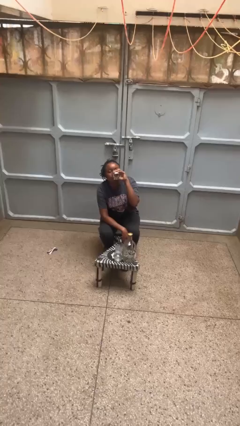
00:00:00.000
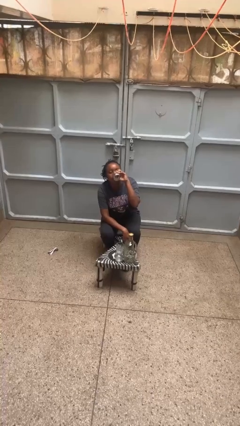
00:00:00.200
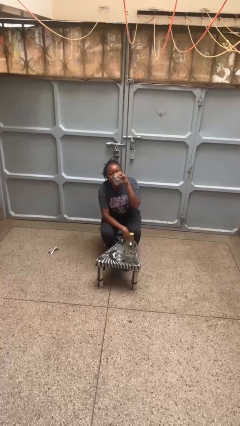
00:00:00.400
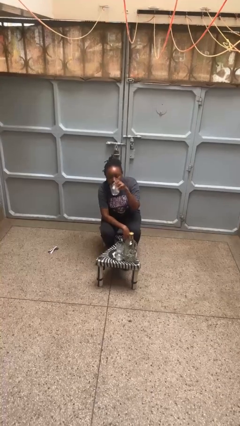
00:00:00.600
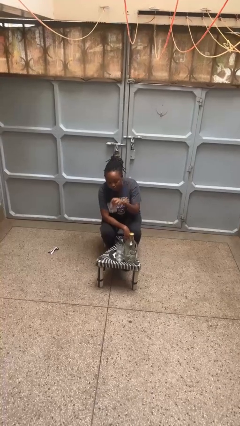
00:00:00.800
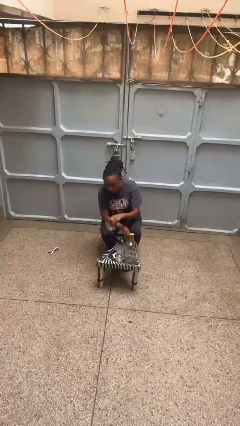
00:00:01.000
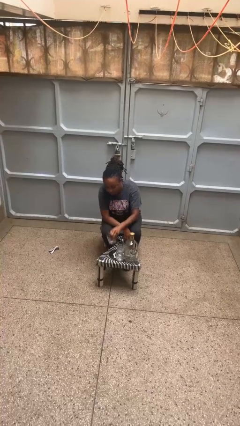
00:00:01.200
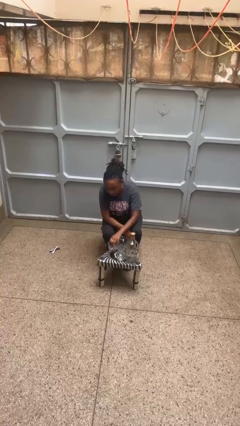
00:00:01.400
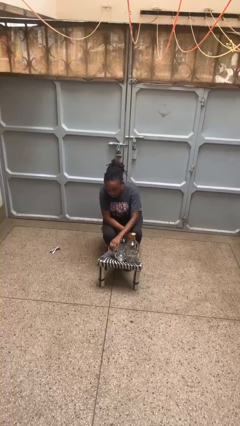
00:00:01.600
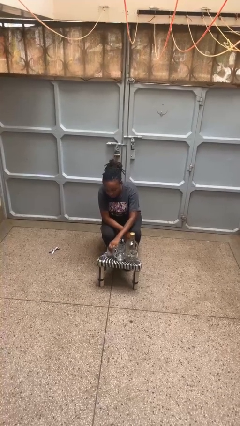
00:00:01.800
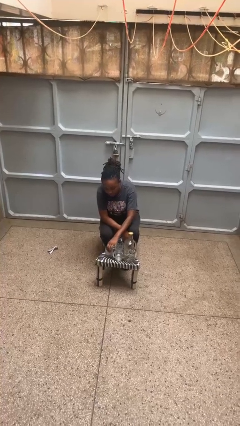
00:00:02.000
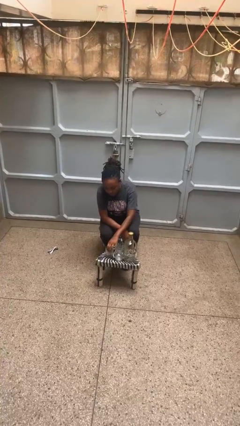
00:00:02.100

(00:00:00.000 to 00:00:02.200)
person puts down object on table

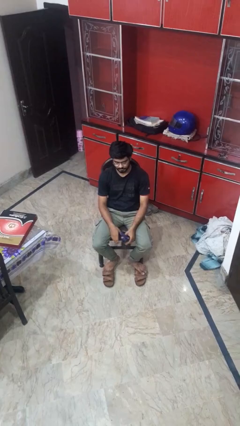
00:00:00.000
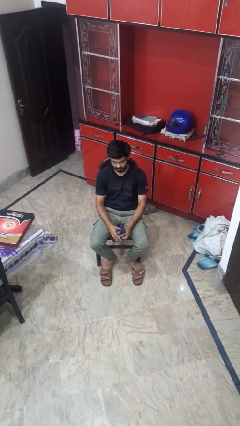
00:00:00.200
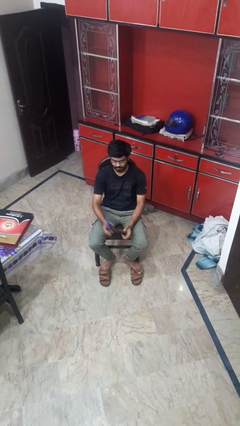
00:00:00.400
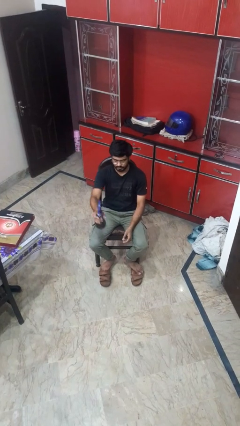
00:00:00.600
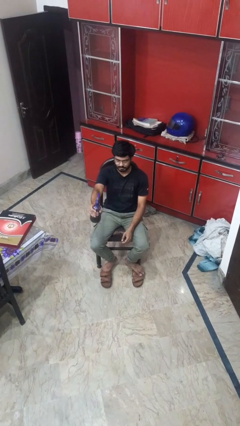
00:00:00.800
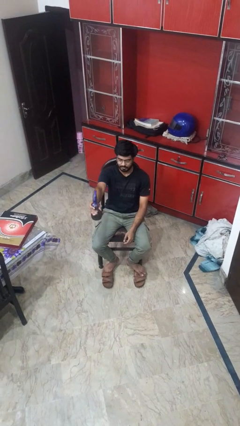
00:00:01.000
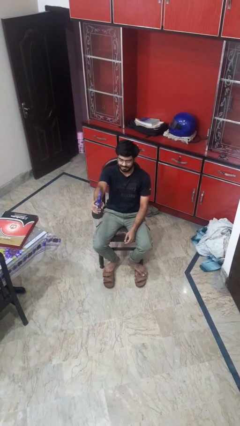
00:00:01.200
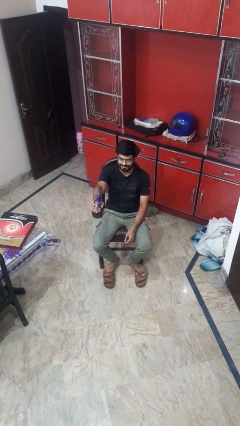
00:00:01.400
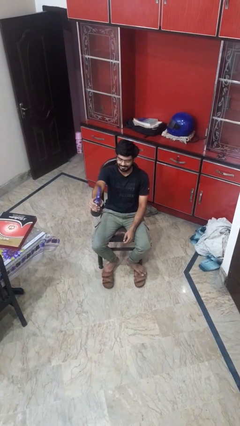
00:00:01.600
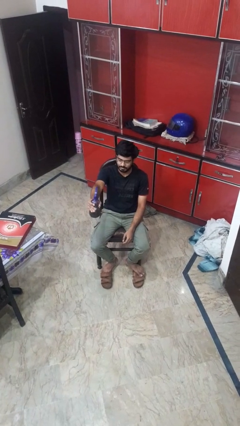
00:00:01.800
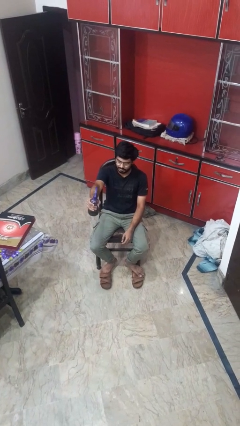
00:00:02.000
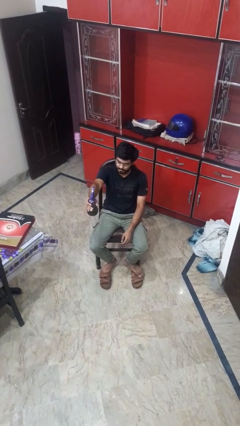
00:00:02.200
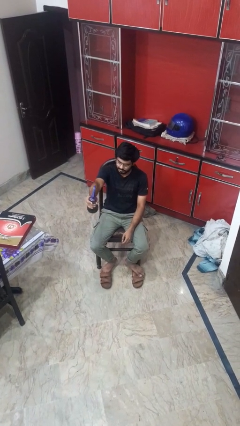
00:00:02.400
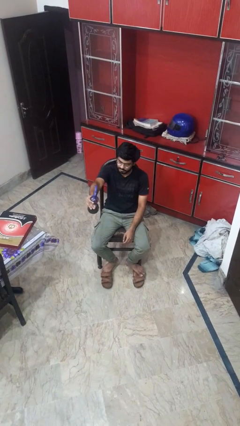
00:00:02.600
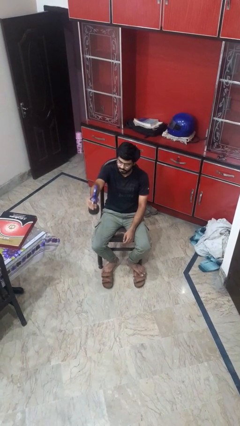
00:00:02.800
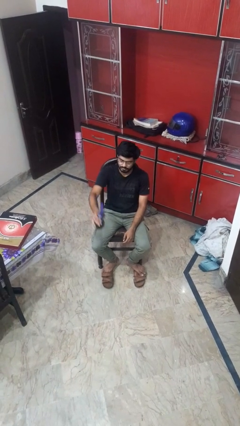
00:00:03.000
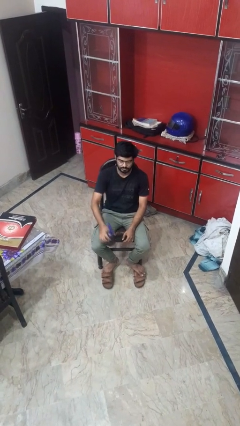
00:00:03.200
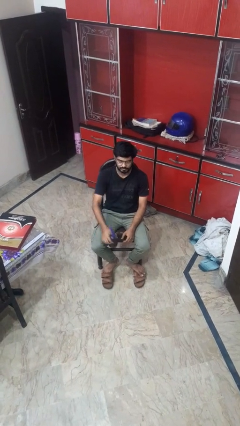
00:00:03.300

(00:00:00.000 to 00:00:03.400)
person squeezes object

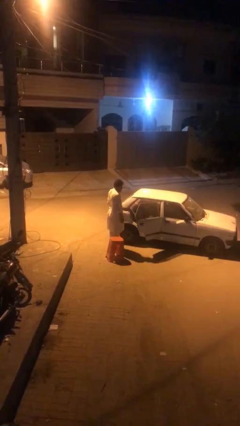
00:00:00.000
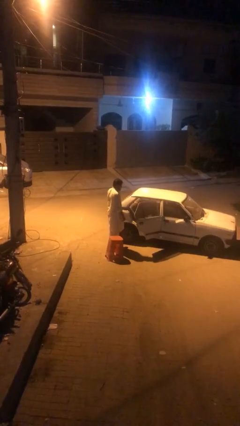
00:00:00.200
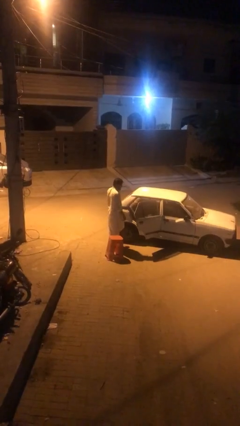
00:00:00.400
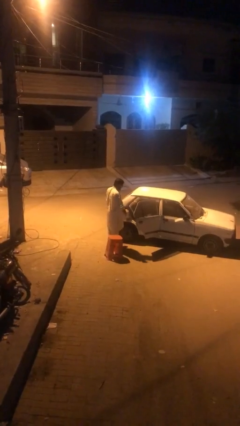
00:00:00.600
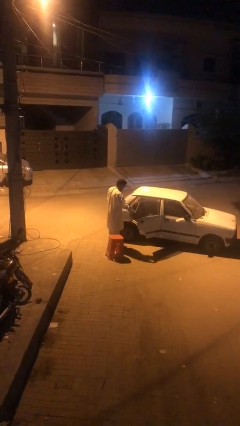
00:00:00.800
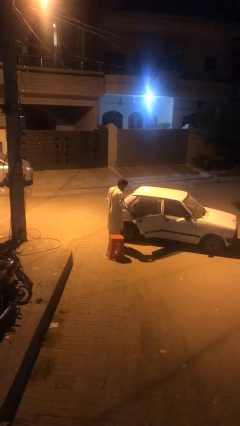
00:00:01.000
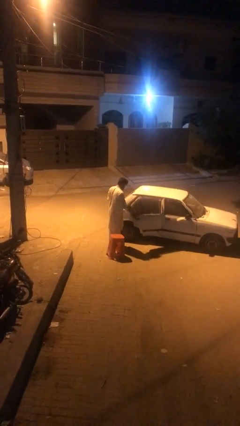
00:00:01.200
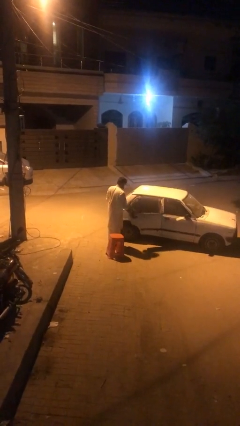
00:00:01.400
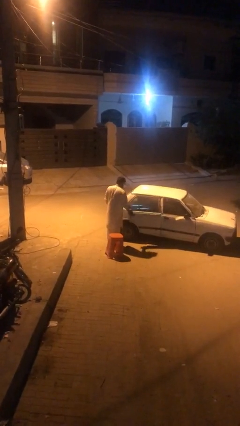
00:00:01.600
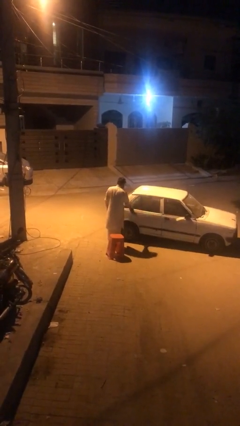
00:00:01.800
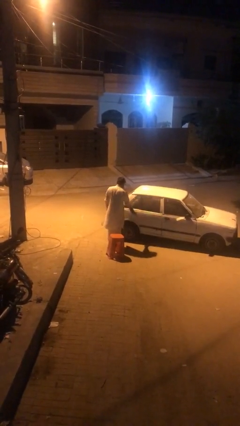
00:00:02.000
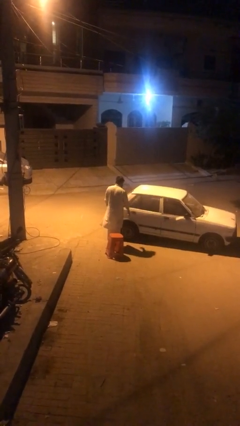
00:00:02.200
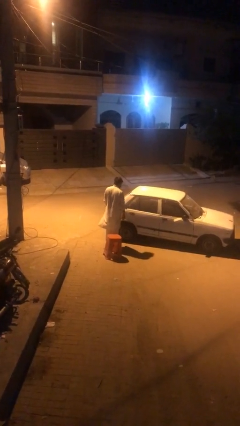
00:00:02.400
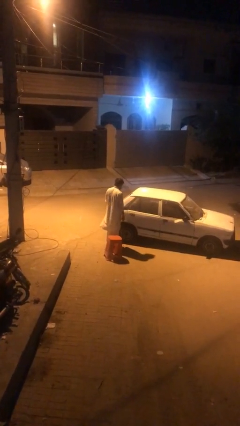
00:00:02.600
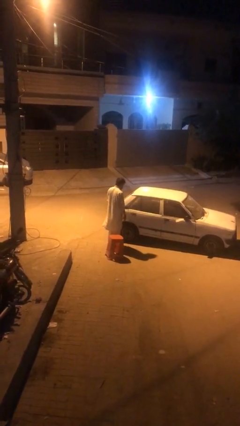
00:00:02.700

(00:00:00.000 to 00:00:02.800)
person closes car door

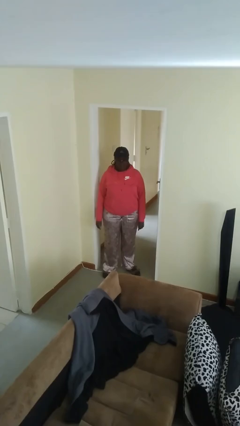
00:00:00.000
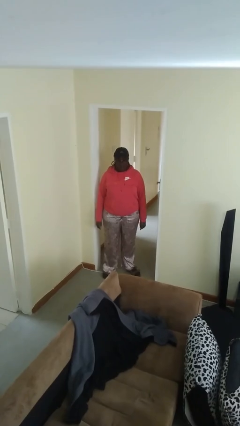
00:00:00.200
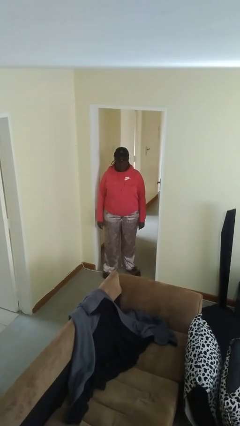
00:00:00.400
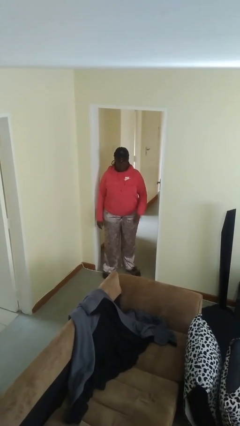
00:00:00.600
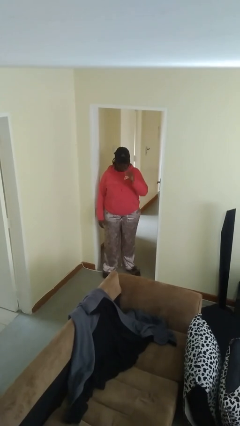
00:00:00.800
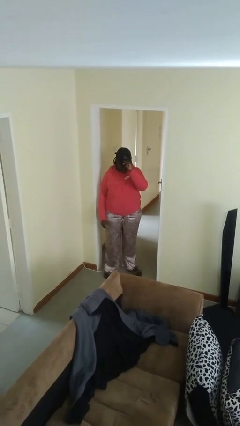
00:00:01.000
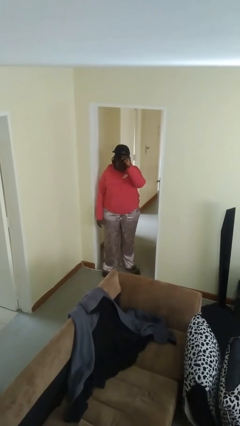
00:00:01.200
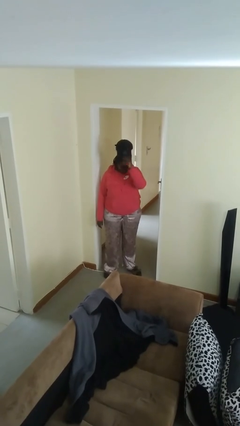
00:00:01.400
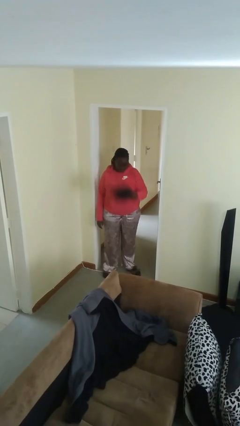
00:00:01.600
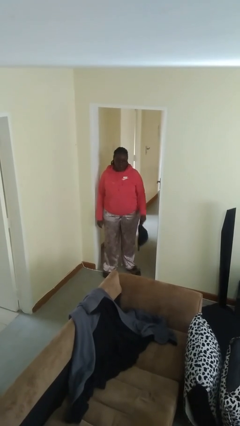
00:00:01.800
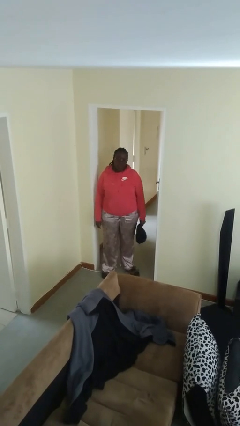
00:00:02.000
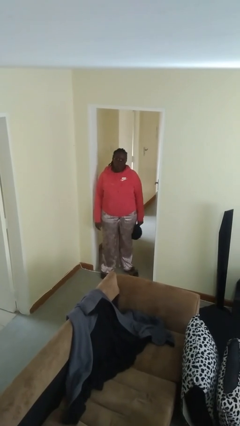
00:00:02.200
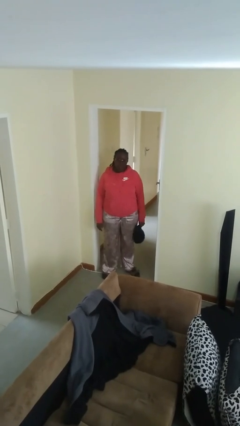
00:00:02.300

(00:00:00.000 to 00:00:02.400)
person takes off hat

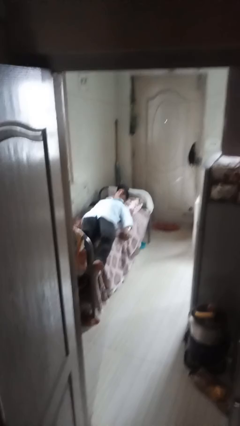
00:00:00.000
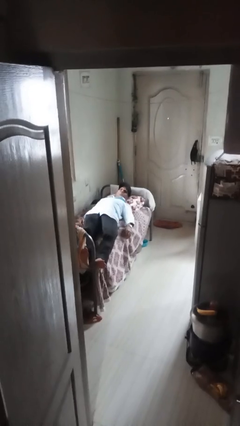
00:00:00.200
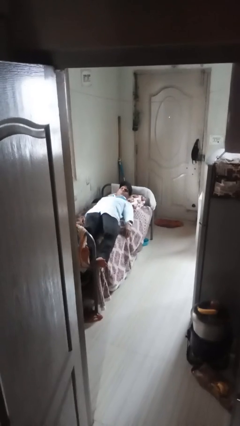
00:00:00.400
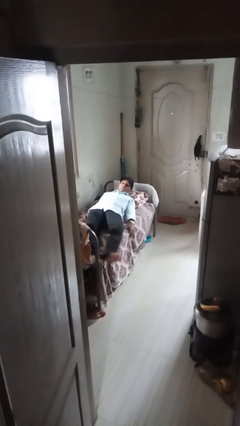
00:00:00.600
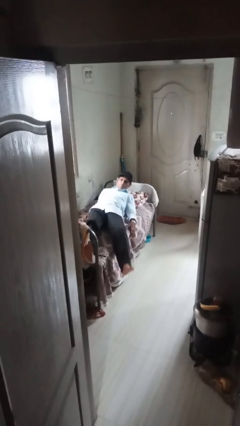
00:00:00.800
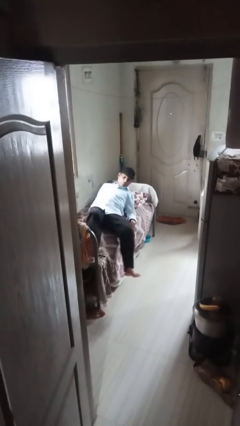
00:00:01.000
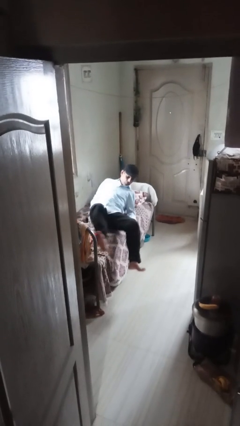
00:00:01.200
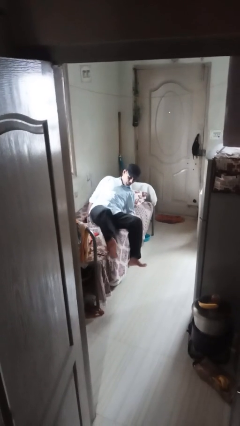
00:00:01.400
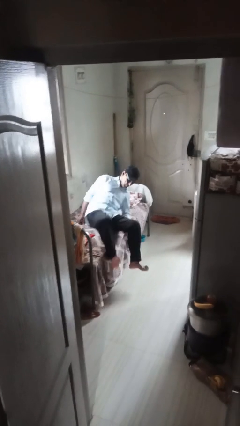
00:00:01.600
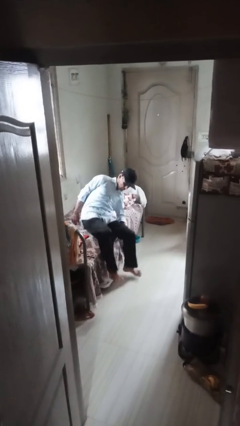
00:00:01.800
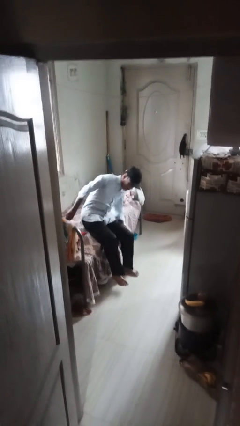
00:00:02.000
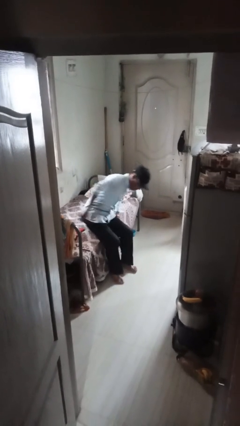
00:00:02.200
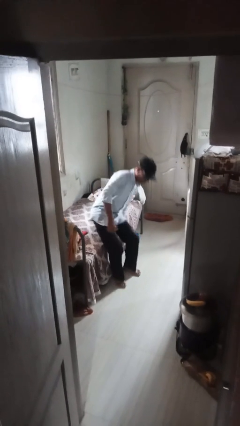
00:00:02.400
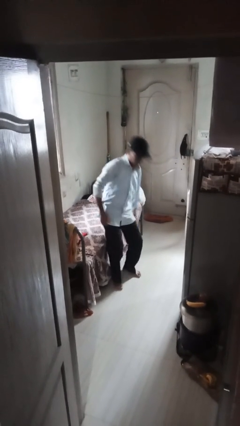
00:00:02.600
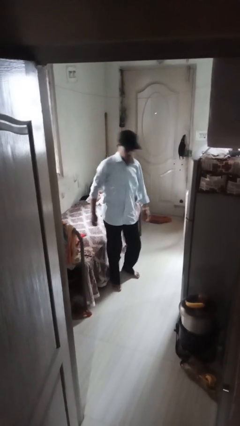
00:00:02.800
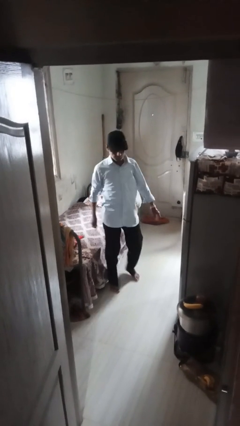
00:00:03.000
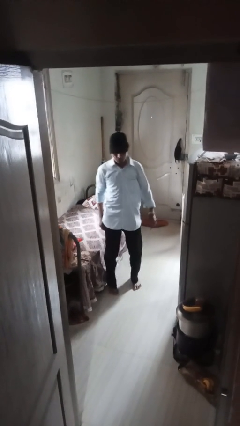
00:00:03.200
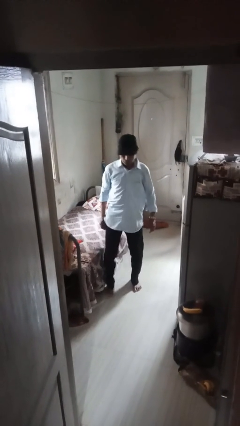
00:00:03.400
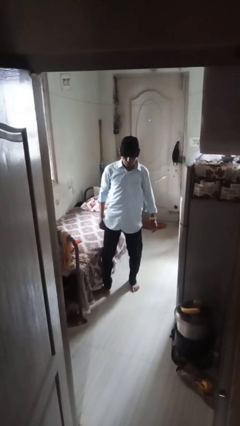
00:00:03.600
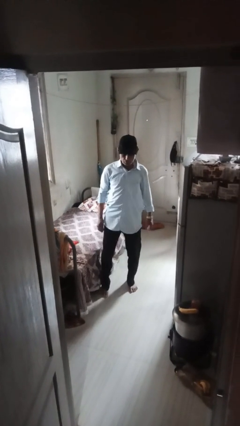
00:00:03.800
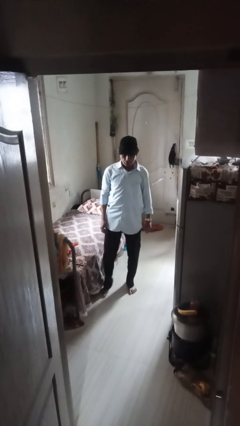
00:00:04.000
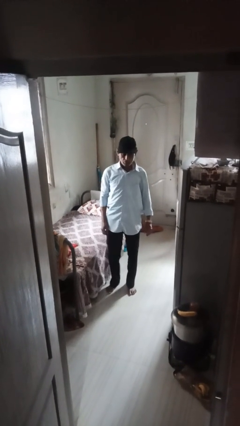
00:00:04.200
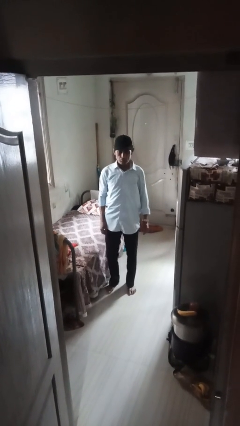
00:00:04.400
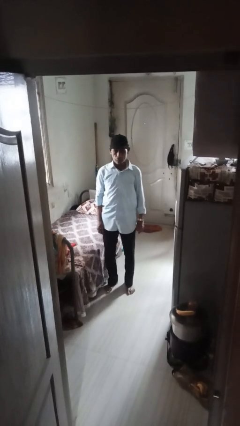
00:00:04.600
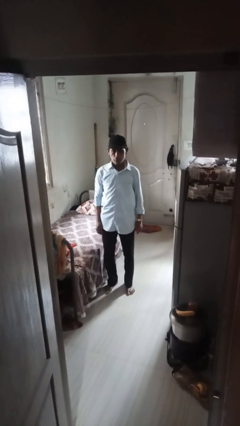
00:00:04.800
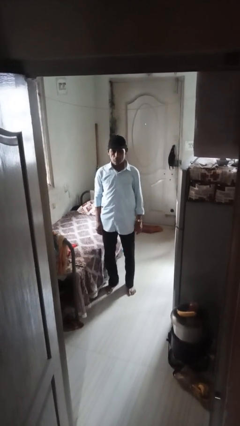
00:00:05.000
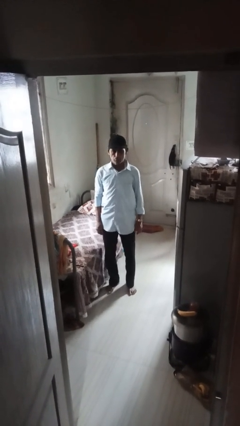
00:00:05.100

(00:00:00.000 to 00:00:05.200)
person stands up

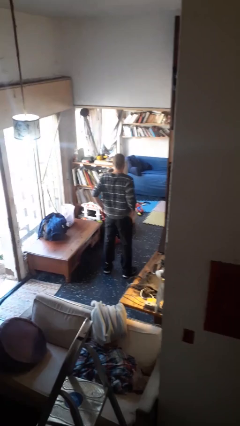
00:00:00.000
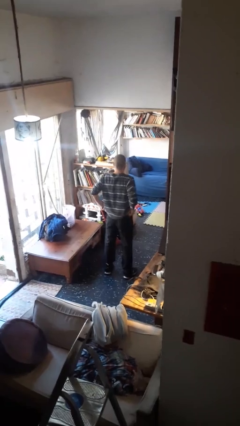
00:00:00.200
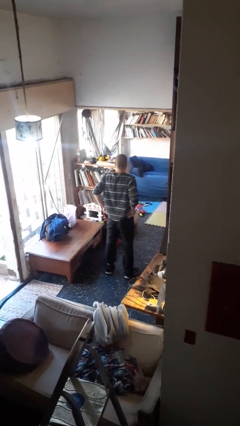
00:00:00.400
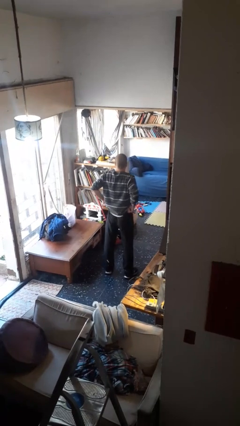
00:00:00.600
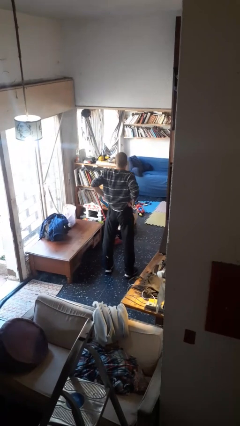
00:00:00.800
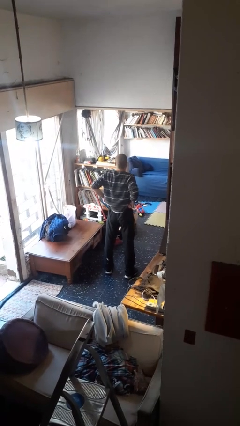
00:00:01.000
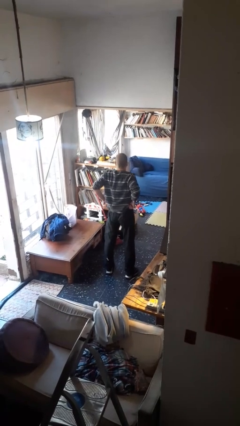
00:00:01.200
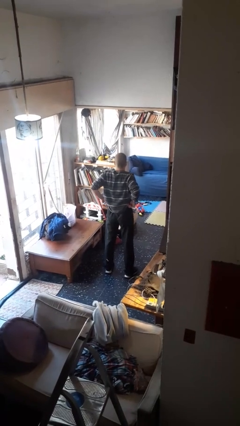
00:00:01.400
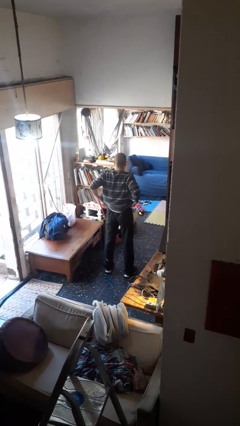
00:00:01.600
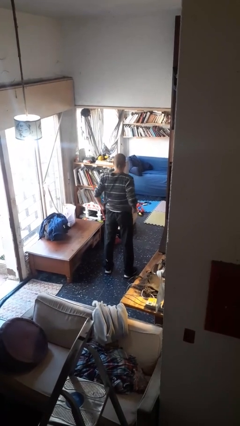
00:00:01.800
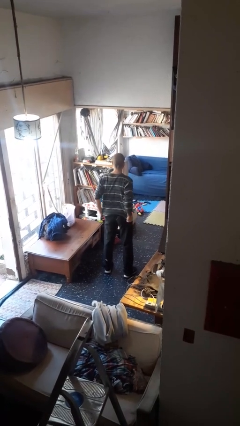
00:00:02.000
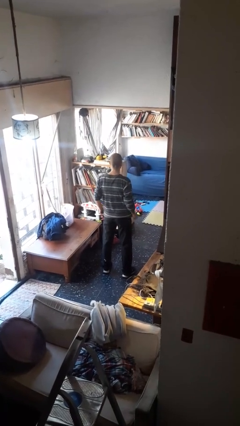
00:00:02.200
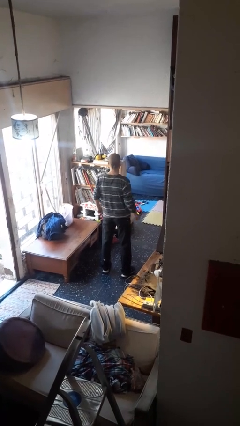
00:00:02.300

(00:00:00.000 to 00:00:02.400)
person hikes up pants
